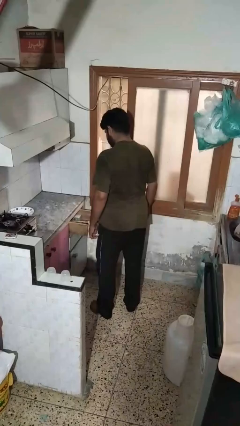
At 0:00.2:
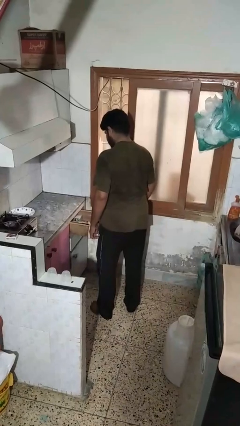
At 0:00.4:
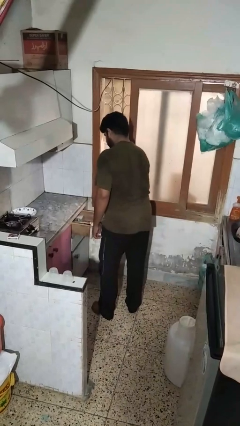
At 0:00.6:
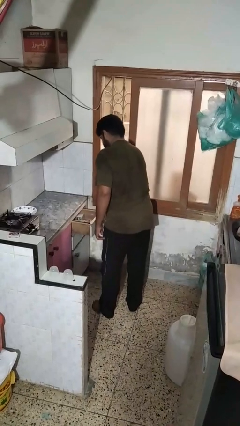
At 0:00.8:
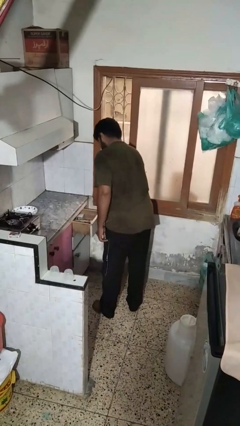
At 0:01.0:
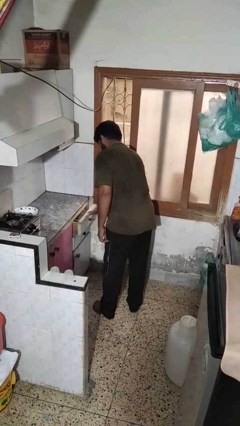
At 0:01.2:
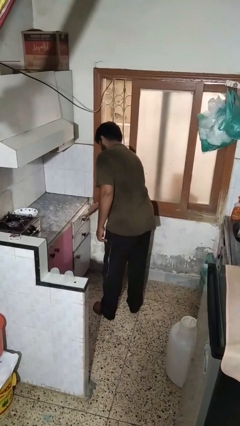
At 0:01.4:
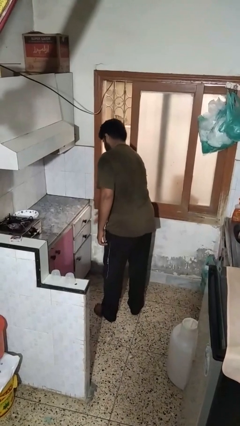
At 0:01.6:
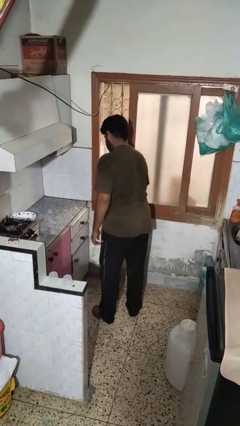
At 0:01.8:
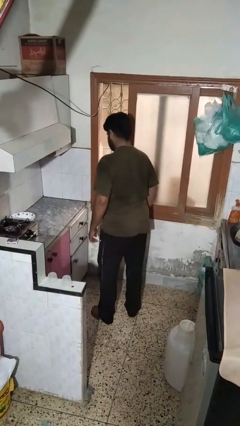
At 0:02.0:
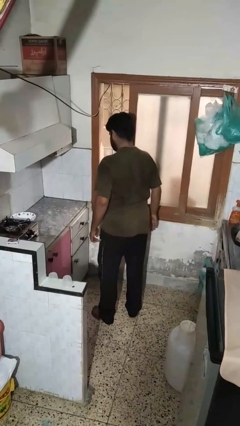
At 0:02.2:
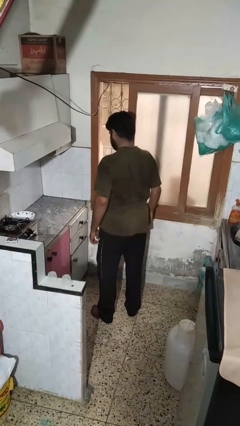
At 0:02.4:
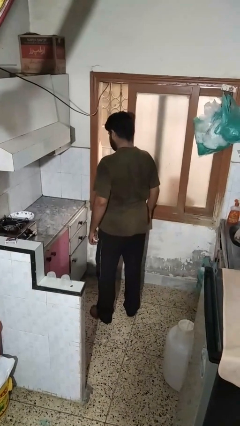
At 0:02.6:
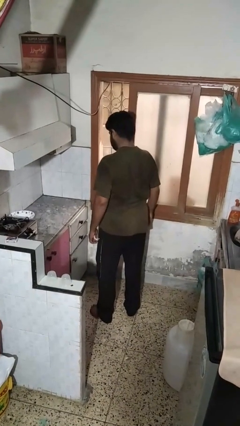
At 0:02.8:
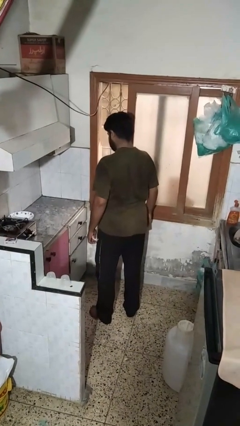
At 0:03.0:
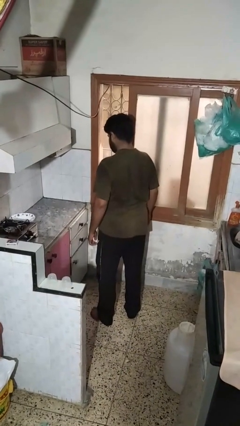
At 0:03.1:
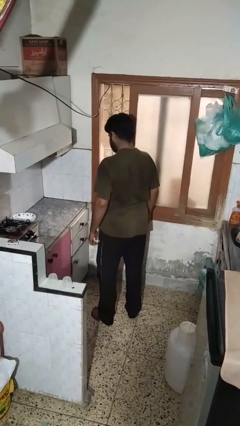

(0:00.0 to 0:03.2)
person closes kitchen drawer

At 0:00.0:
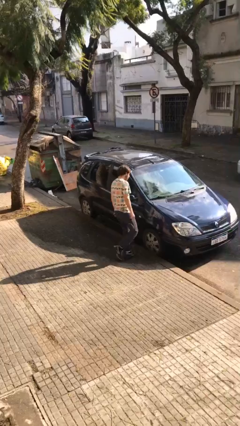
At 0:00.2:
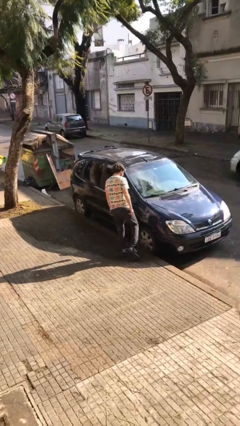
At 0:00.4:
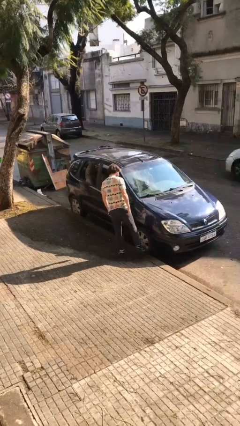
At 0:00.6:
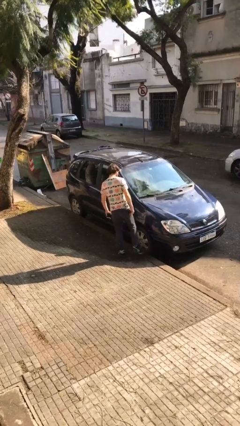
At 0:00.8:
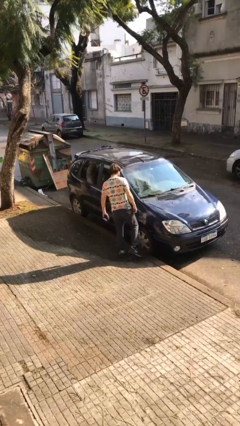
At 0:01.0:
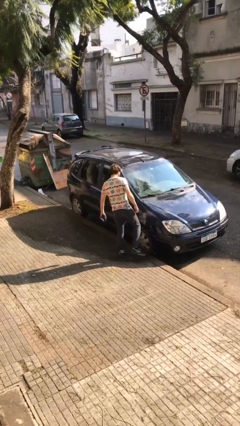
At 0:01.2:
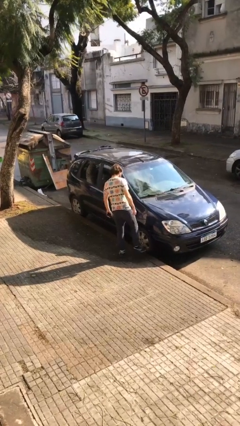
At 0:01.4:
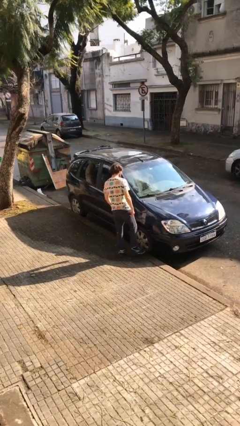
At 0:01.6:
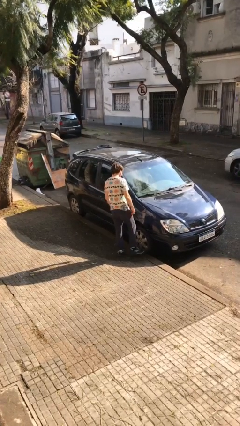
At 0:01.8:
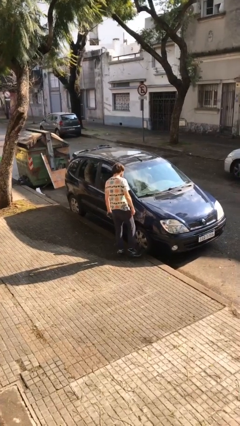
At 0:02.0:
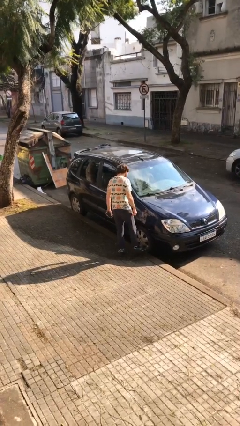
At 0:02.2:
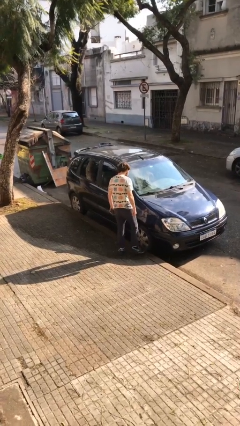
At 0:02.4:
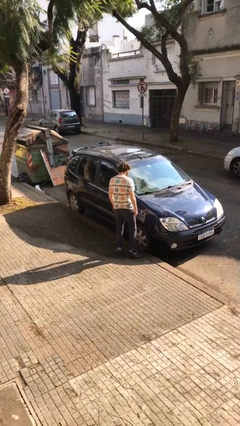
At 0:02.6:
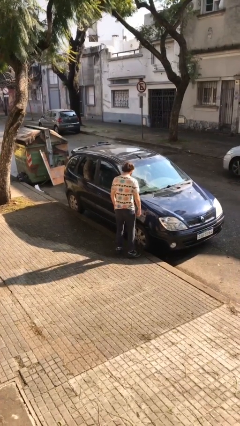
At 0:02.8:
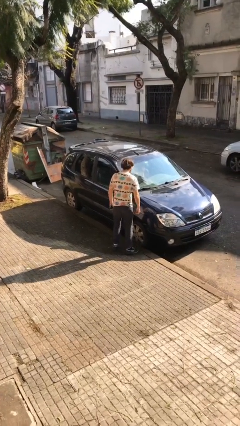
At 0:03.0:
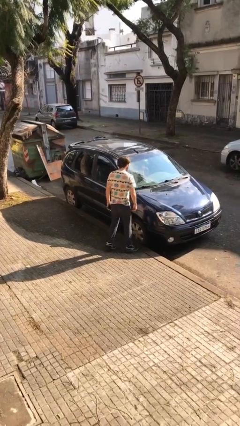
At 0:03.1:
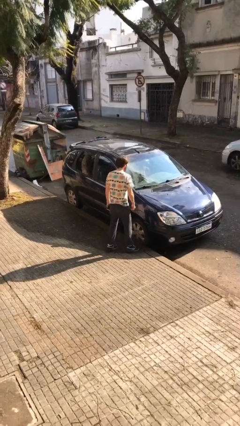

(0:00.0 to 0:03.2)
person kicks car tires

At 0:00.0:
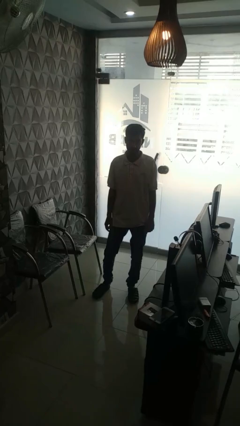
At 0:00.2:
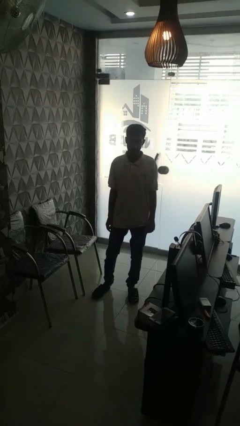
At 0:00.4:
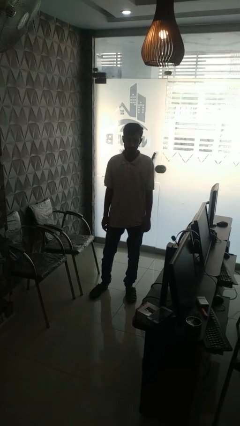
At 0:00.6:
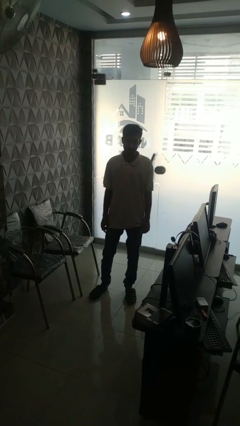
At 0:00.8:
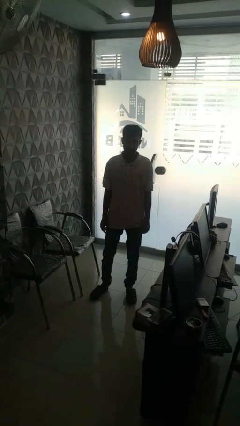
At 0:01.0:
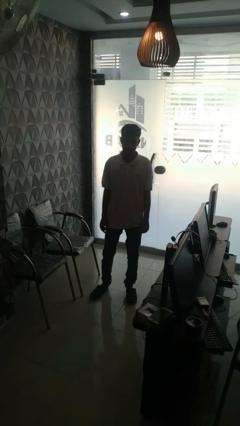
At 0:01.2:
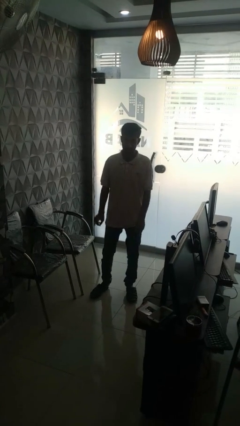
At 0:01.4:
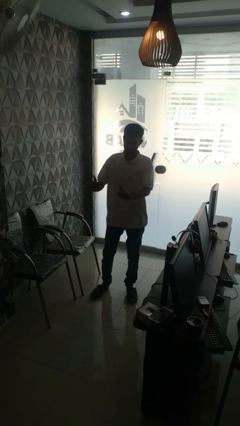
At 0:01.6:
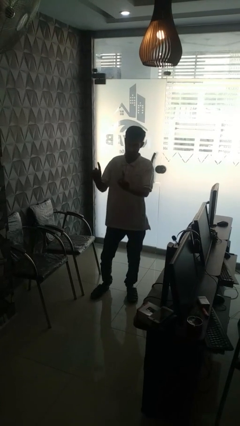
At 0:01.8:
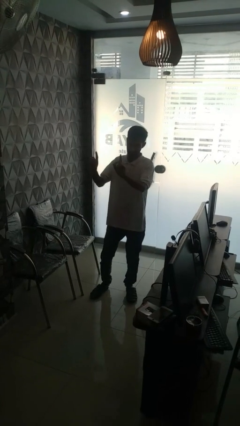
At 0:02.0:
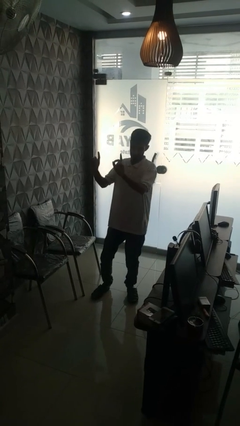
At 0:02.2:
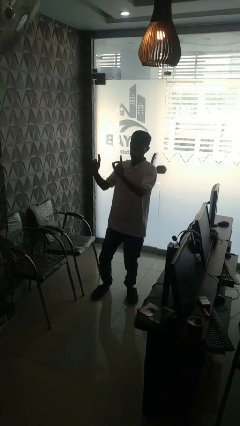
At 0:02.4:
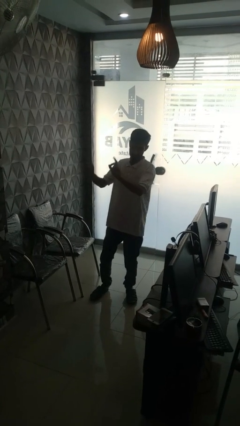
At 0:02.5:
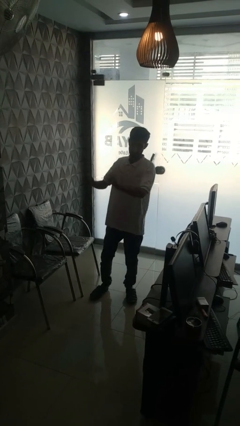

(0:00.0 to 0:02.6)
person dances in place

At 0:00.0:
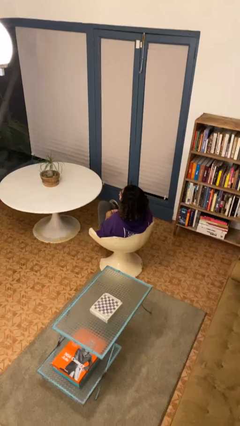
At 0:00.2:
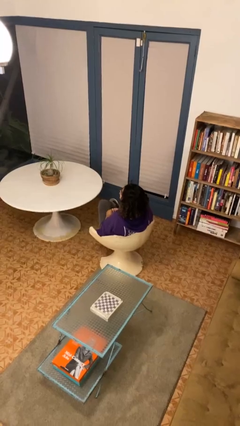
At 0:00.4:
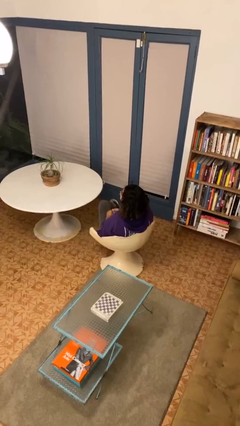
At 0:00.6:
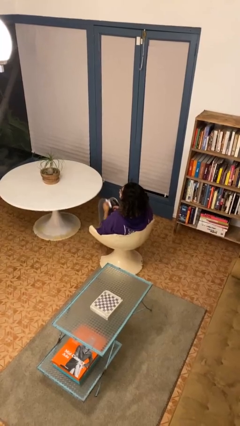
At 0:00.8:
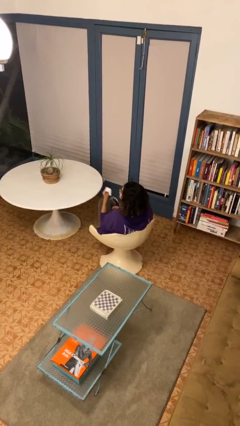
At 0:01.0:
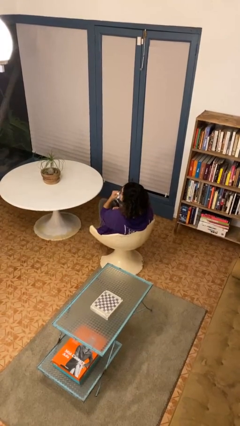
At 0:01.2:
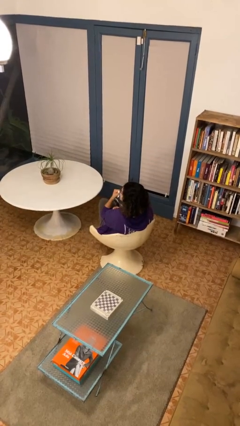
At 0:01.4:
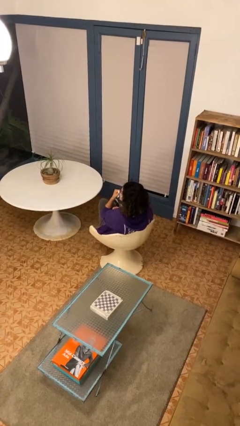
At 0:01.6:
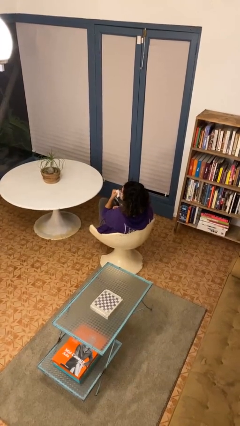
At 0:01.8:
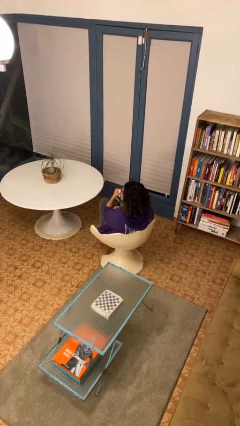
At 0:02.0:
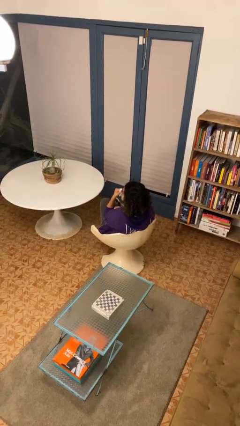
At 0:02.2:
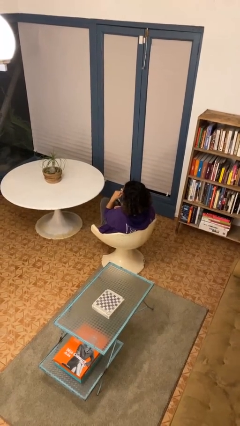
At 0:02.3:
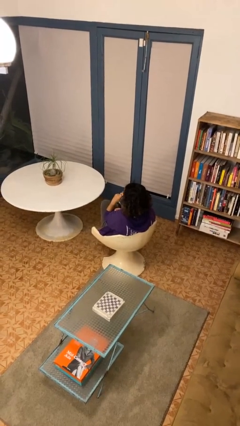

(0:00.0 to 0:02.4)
person blows nose

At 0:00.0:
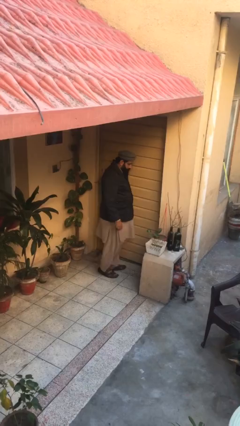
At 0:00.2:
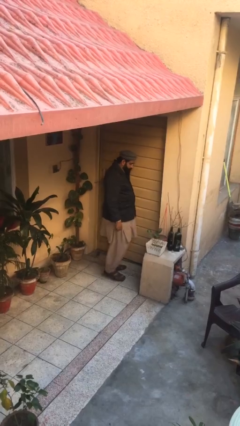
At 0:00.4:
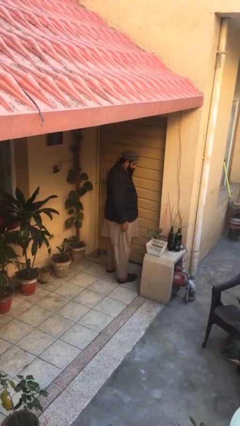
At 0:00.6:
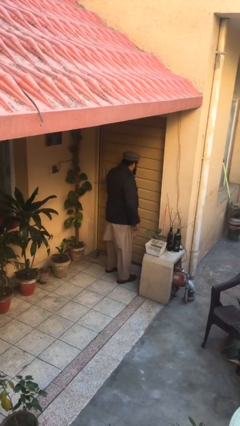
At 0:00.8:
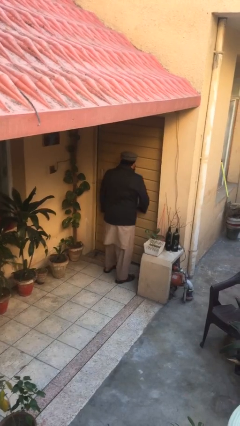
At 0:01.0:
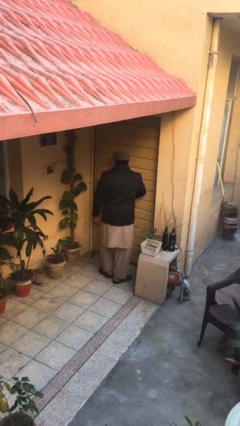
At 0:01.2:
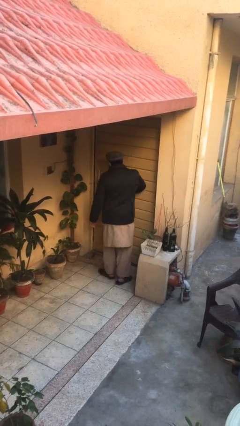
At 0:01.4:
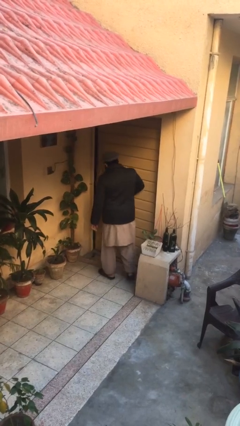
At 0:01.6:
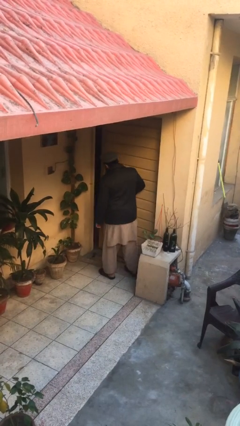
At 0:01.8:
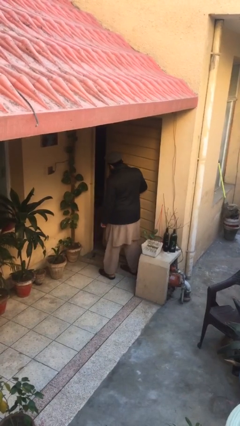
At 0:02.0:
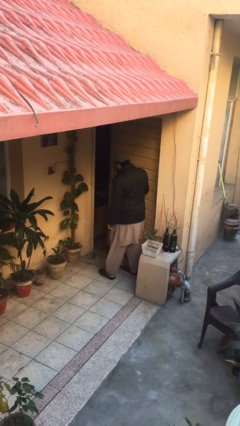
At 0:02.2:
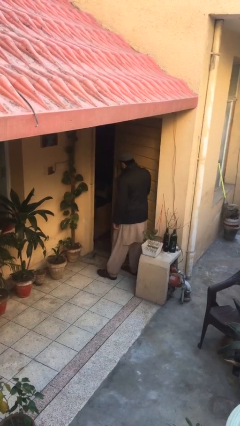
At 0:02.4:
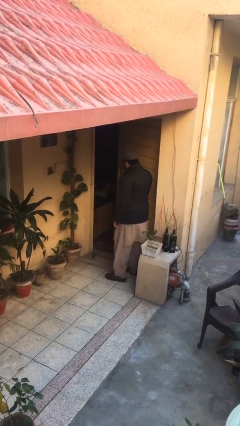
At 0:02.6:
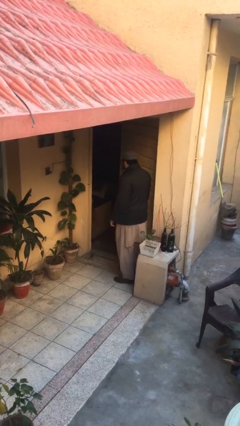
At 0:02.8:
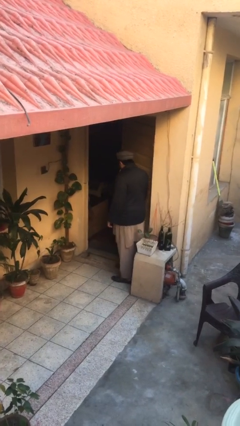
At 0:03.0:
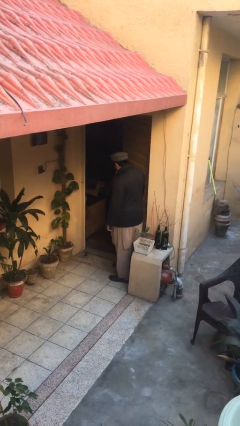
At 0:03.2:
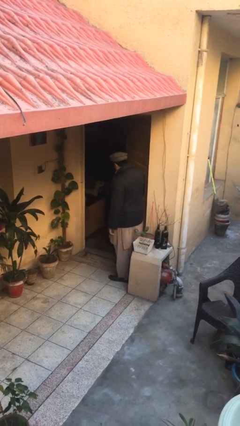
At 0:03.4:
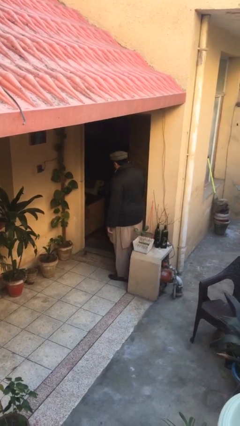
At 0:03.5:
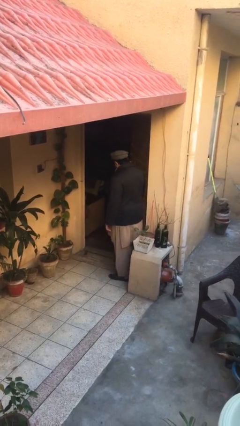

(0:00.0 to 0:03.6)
person opens facility door

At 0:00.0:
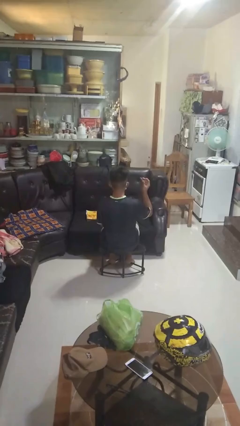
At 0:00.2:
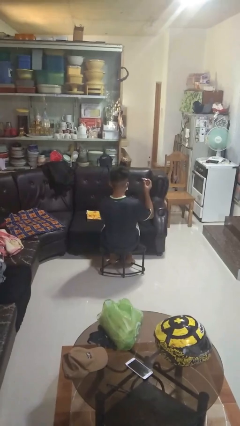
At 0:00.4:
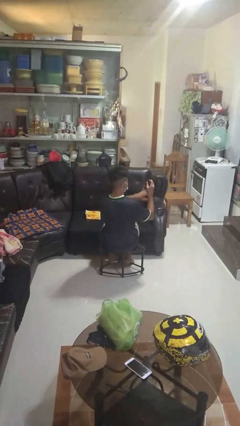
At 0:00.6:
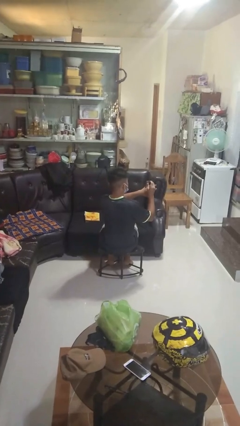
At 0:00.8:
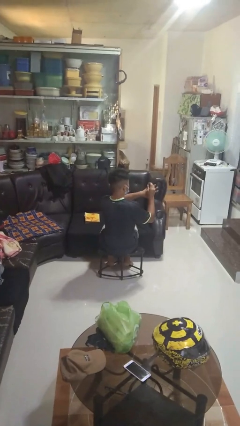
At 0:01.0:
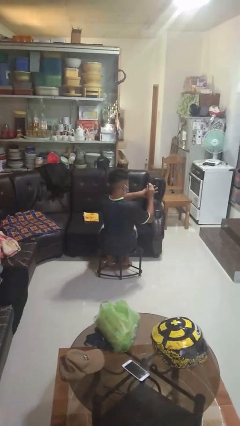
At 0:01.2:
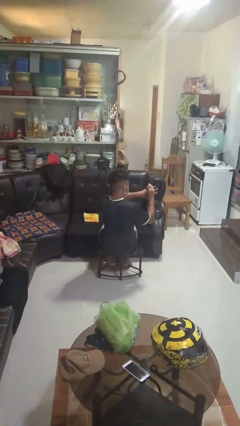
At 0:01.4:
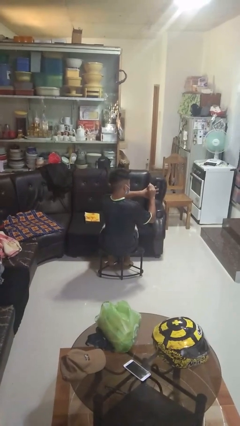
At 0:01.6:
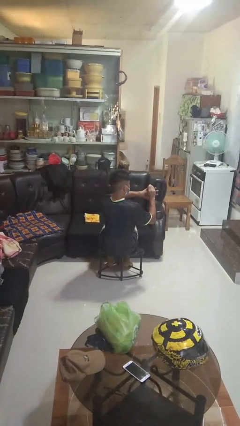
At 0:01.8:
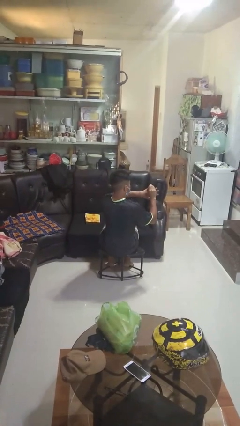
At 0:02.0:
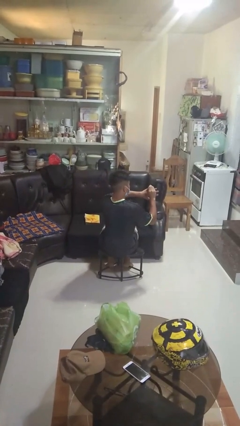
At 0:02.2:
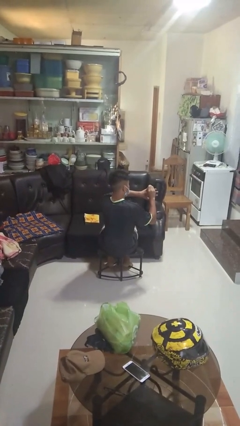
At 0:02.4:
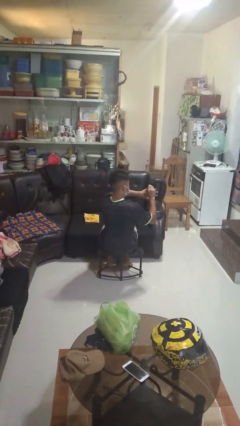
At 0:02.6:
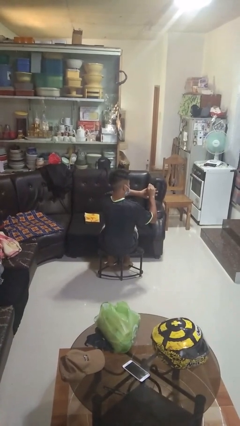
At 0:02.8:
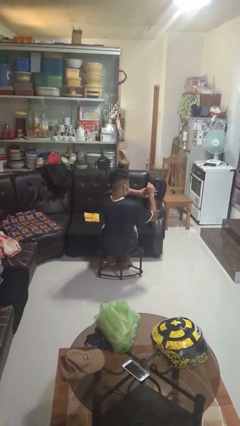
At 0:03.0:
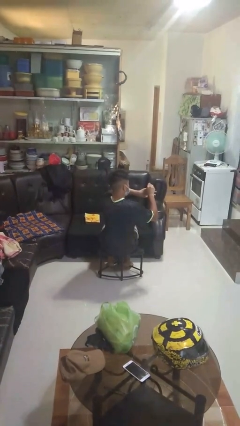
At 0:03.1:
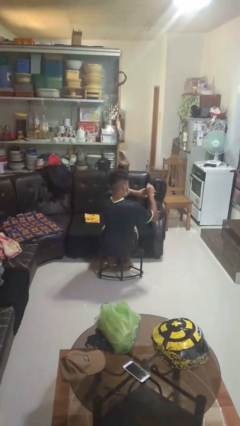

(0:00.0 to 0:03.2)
person clips fingernails
